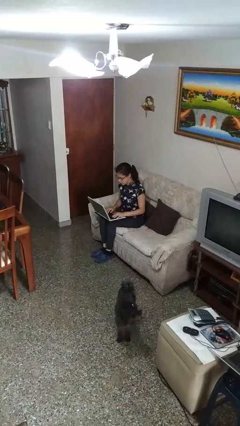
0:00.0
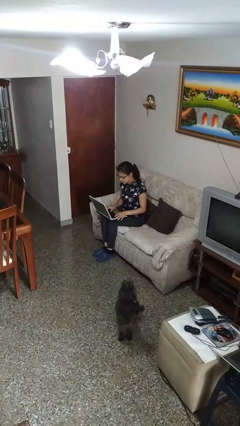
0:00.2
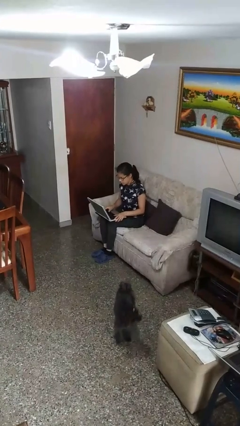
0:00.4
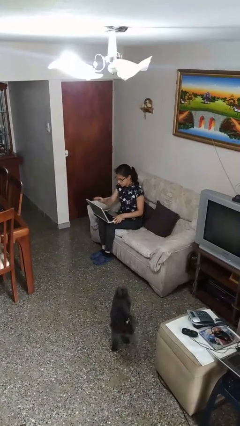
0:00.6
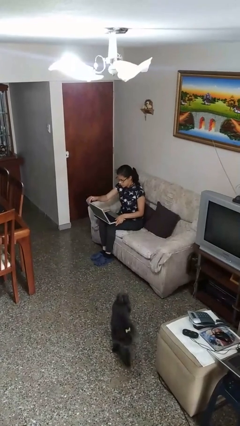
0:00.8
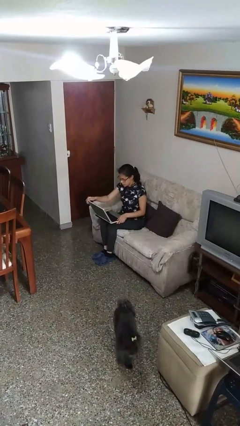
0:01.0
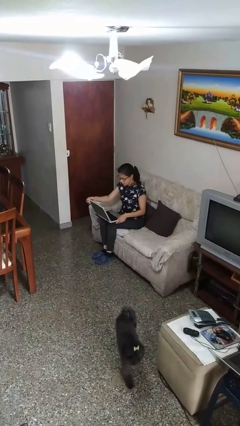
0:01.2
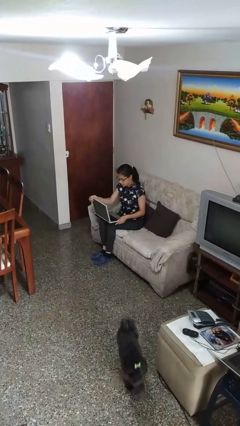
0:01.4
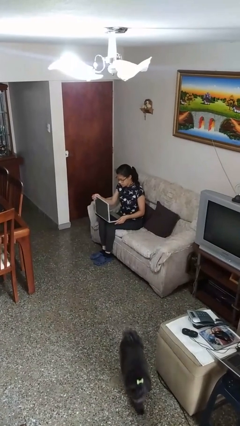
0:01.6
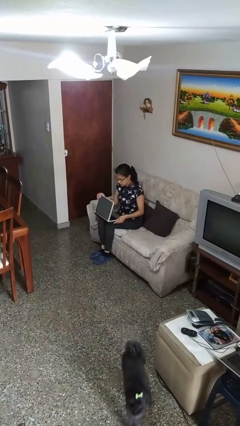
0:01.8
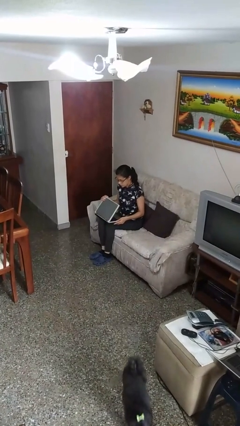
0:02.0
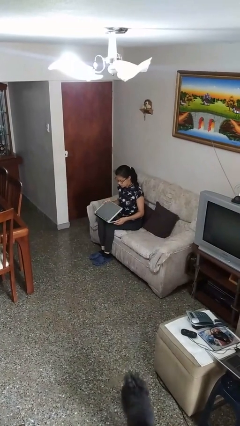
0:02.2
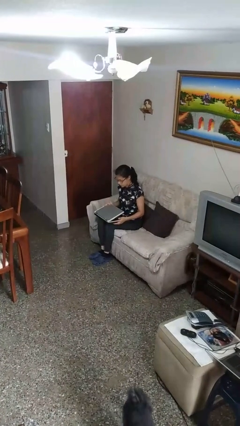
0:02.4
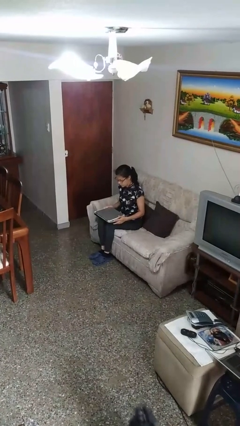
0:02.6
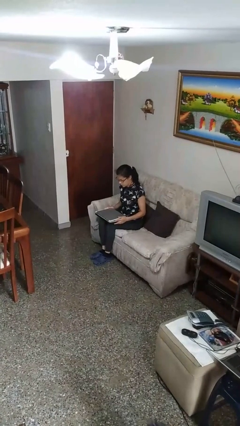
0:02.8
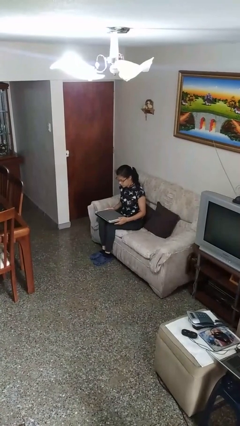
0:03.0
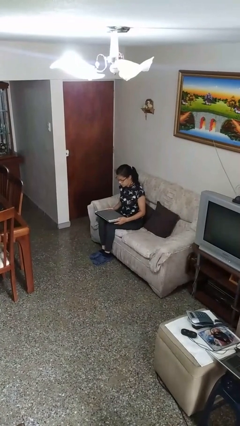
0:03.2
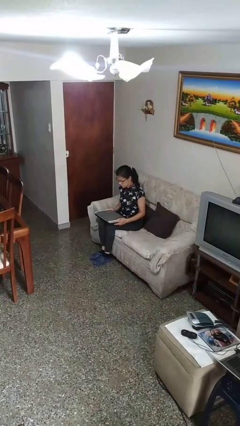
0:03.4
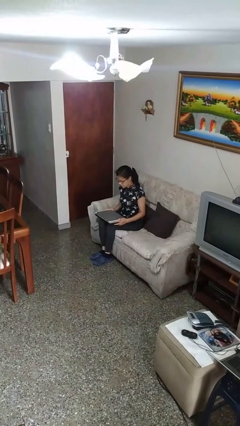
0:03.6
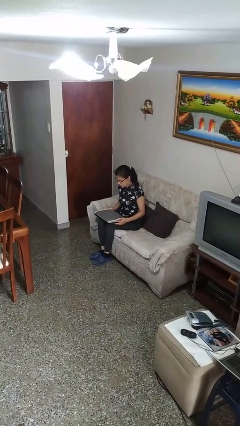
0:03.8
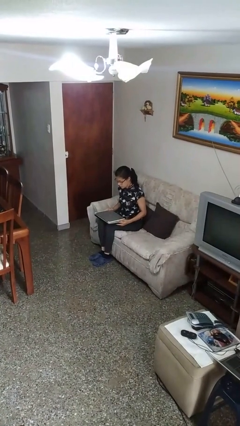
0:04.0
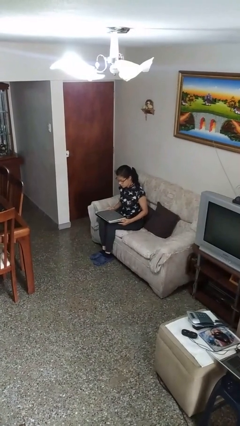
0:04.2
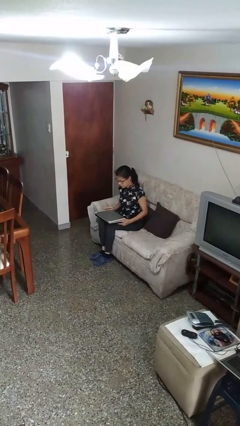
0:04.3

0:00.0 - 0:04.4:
person closes laptop

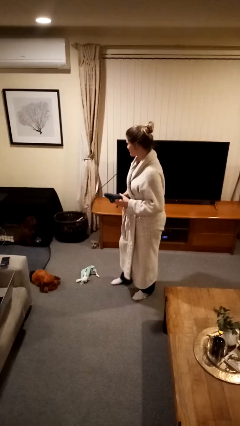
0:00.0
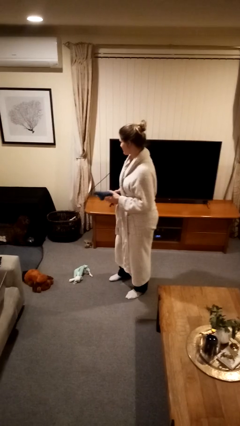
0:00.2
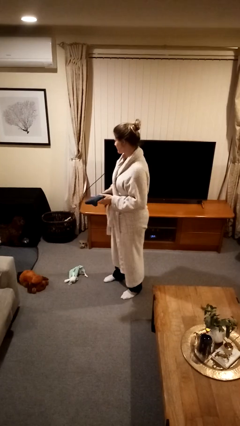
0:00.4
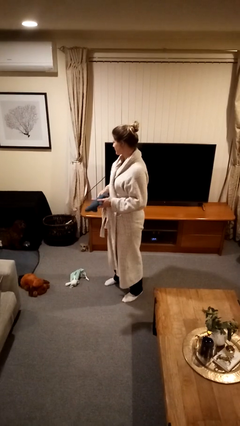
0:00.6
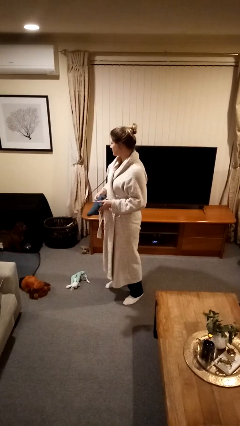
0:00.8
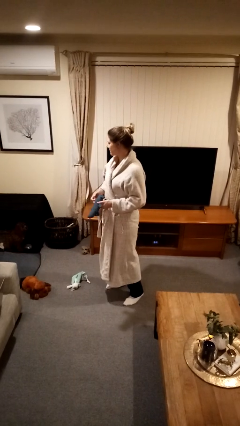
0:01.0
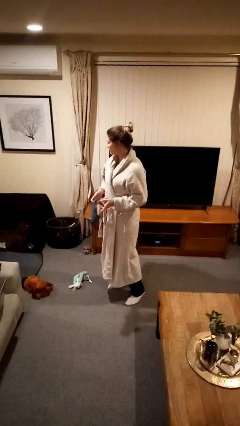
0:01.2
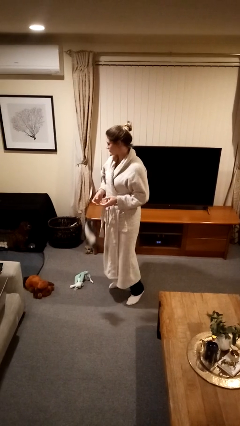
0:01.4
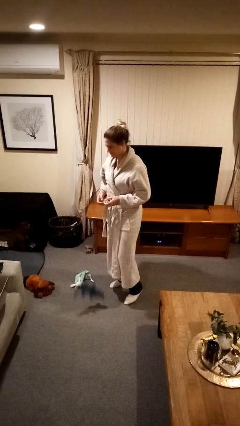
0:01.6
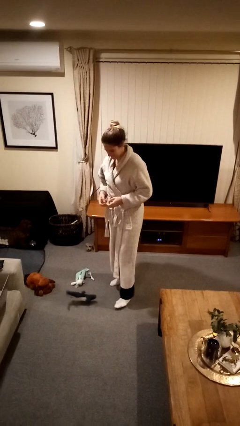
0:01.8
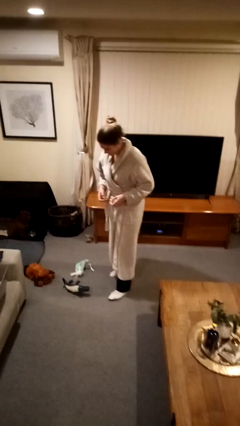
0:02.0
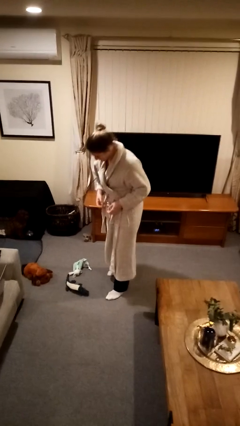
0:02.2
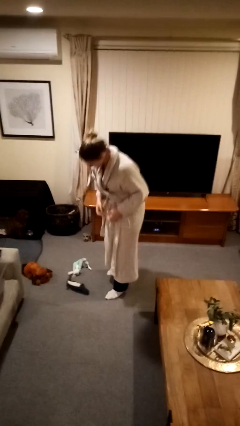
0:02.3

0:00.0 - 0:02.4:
person drops object

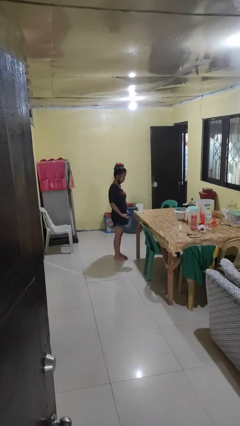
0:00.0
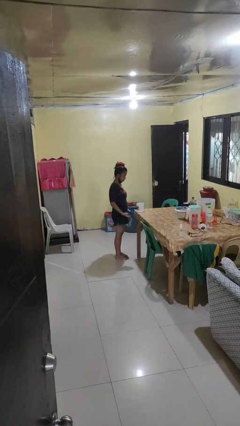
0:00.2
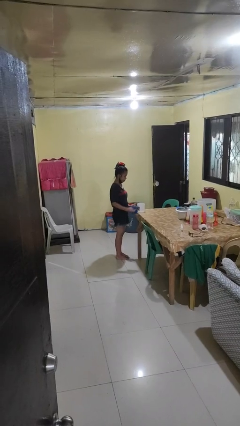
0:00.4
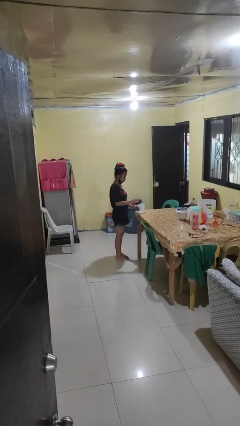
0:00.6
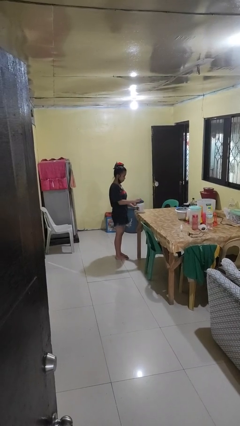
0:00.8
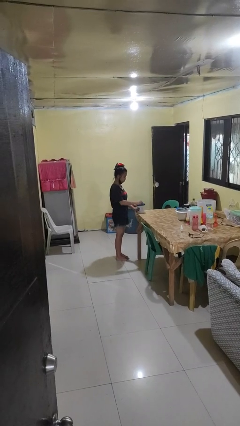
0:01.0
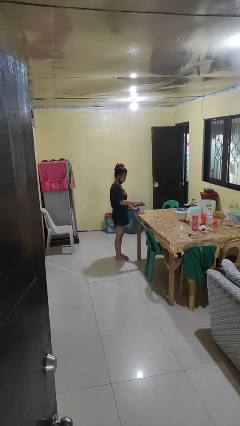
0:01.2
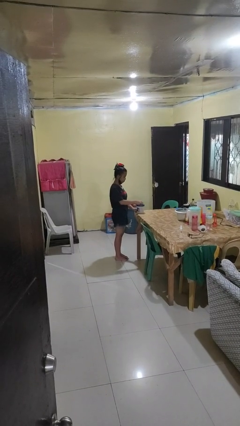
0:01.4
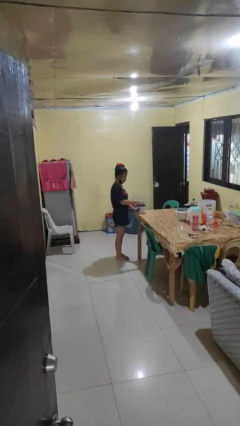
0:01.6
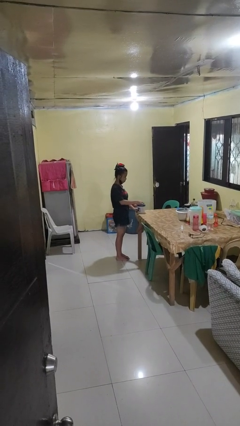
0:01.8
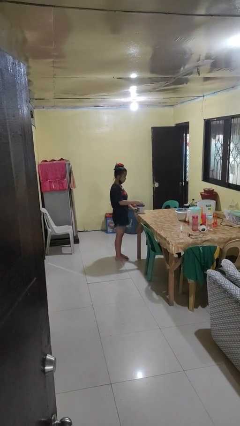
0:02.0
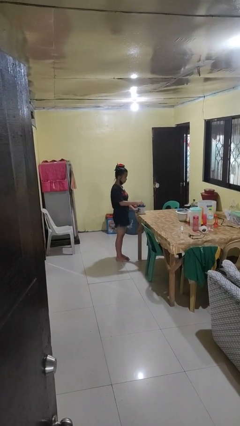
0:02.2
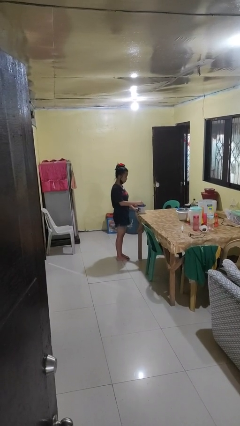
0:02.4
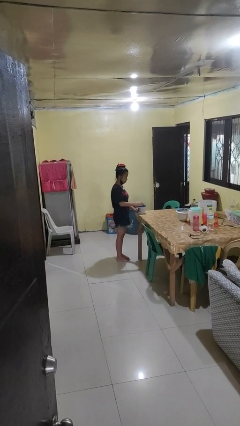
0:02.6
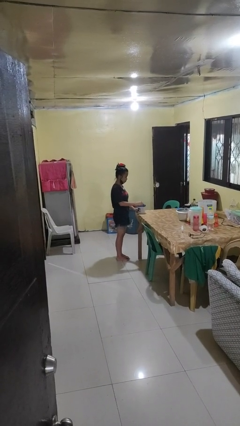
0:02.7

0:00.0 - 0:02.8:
person closes jar

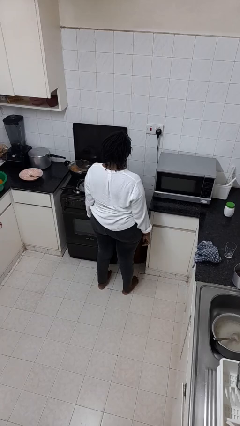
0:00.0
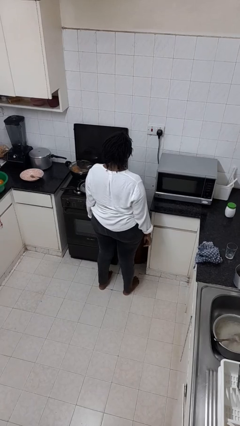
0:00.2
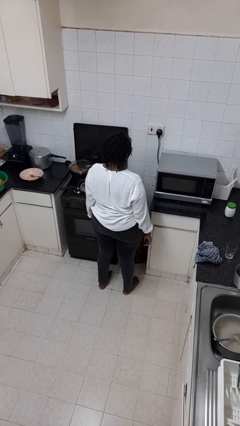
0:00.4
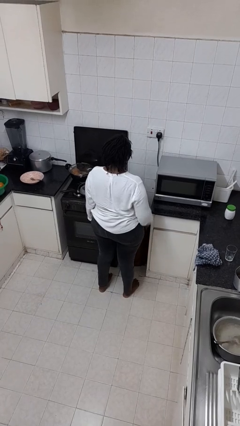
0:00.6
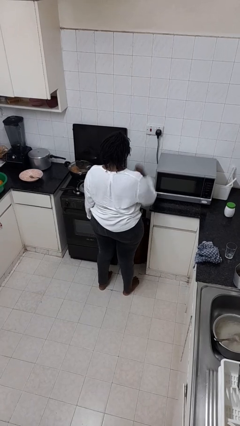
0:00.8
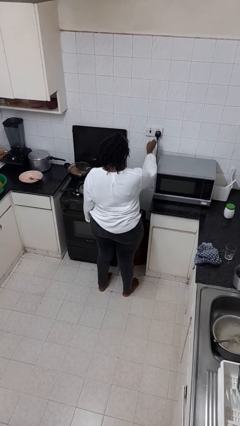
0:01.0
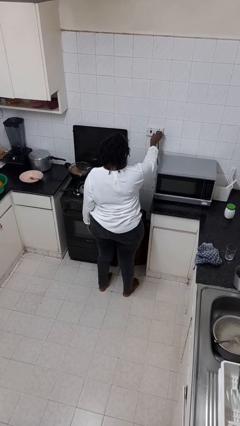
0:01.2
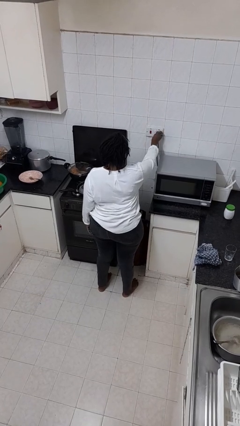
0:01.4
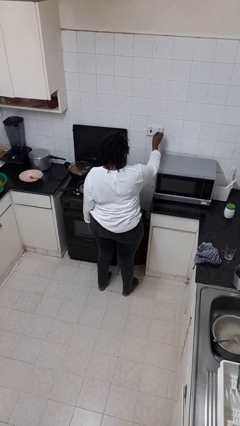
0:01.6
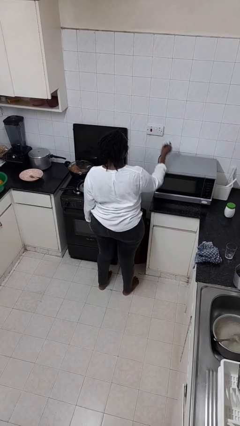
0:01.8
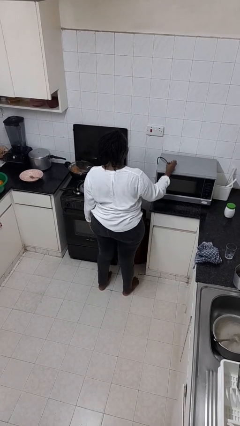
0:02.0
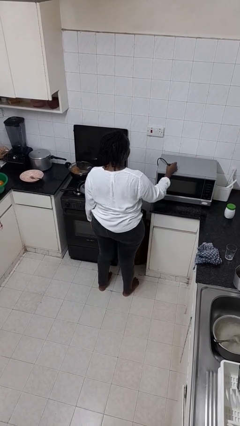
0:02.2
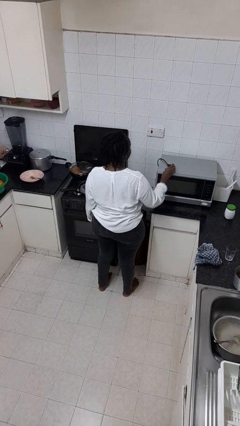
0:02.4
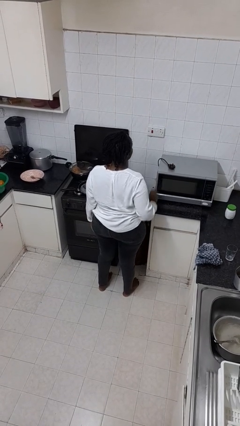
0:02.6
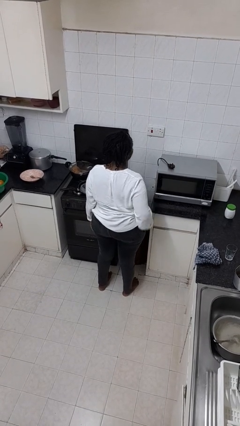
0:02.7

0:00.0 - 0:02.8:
person unplugs from electrical socket

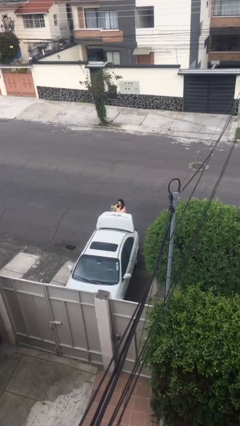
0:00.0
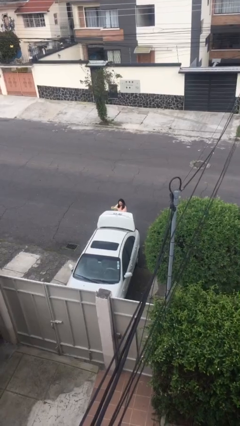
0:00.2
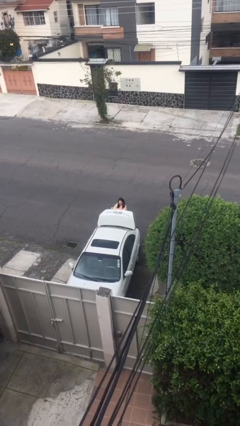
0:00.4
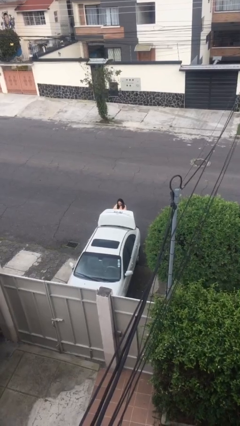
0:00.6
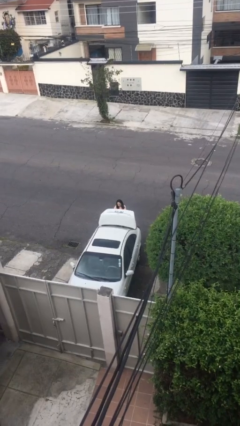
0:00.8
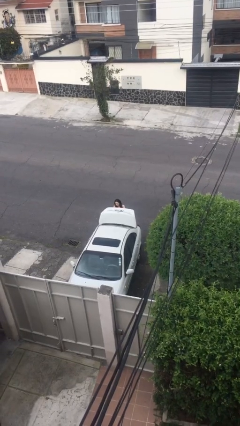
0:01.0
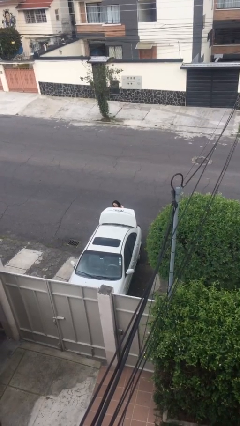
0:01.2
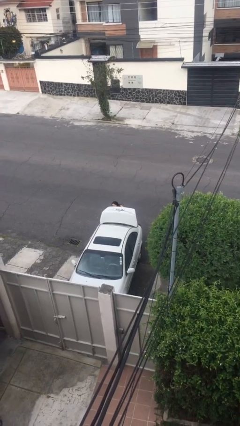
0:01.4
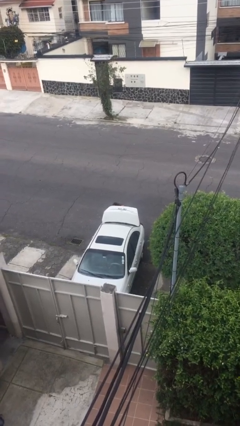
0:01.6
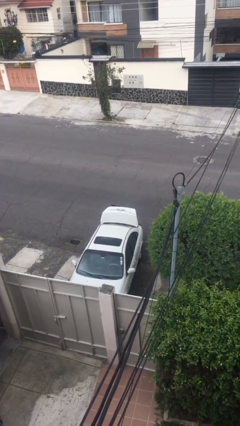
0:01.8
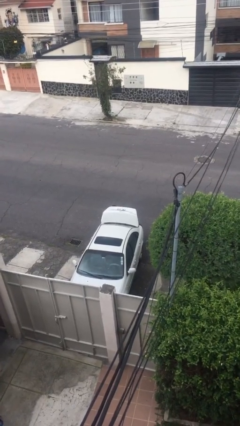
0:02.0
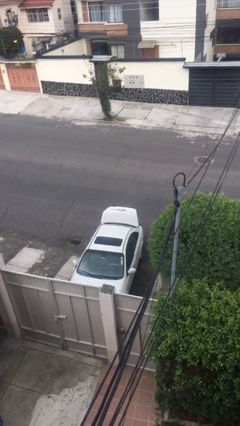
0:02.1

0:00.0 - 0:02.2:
person loads car

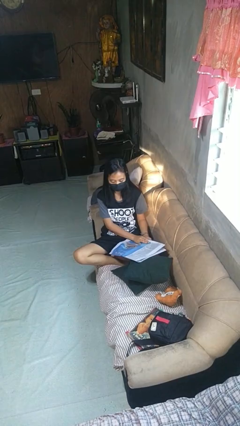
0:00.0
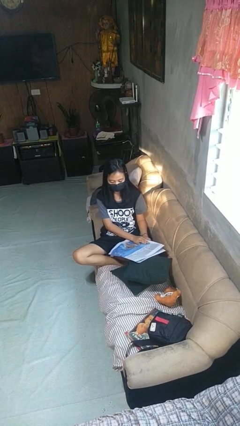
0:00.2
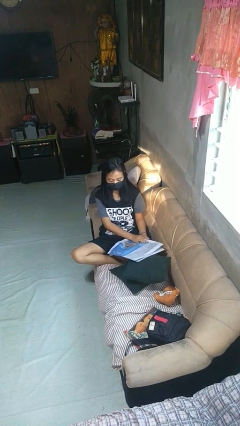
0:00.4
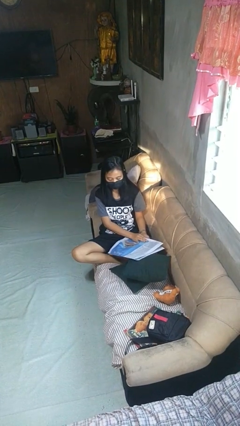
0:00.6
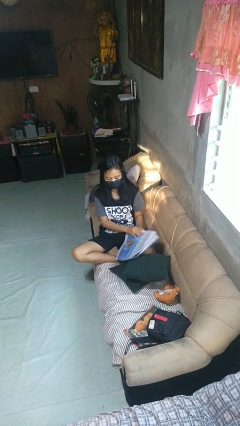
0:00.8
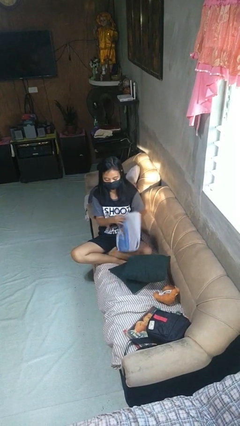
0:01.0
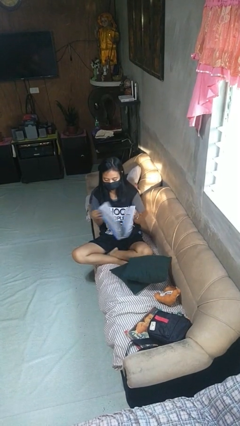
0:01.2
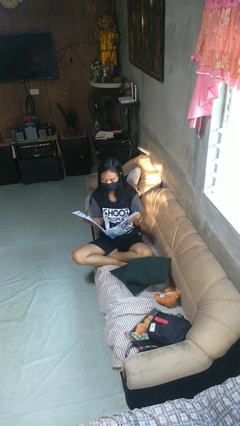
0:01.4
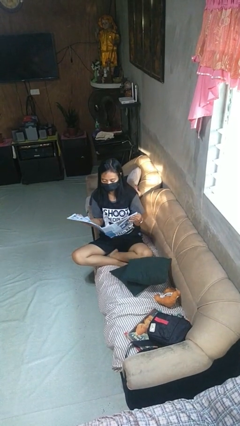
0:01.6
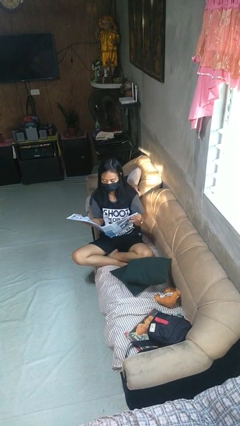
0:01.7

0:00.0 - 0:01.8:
person reads newspaper

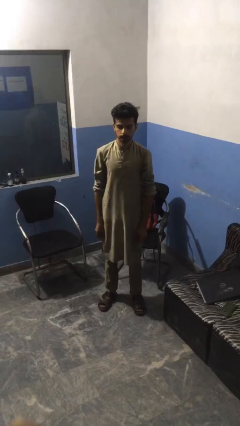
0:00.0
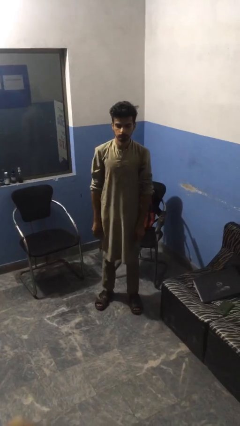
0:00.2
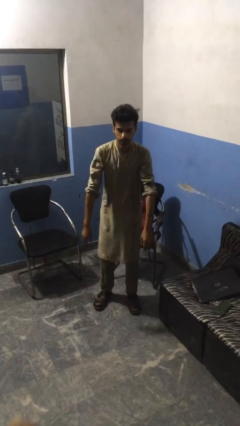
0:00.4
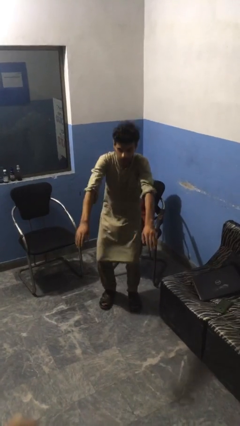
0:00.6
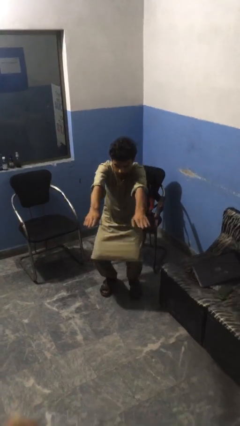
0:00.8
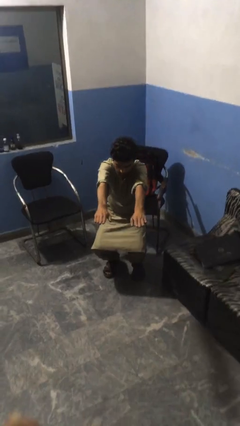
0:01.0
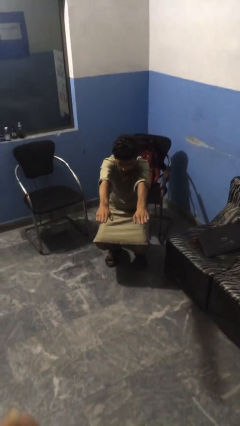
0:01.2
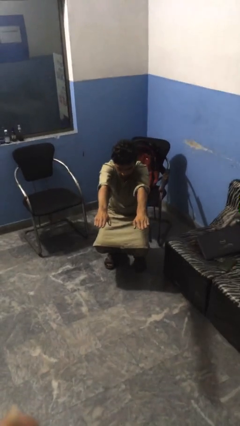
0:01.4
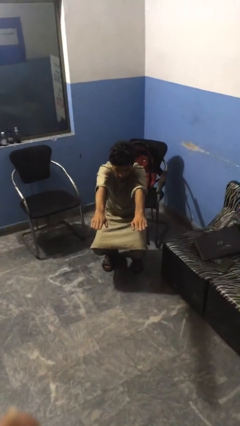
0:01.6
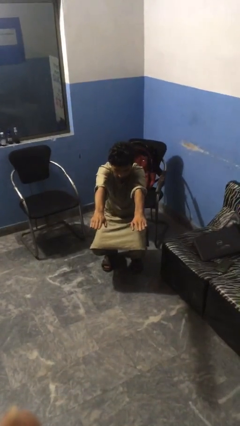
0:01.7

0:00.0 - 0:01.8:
person squats
